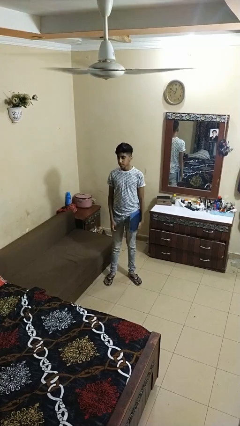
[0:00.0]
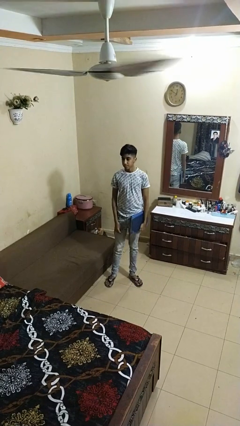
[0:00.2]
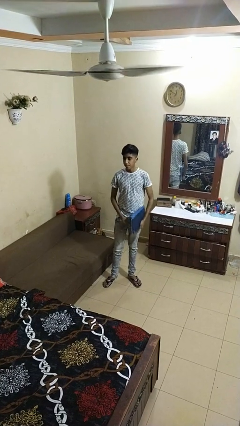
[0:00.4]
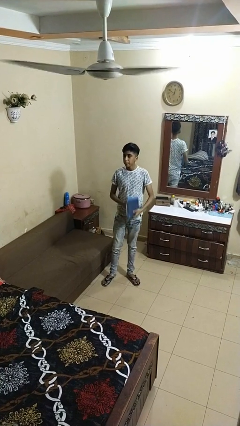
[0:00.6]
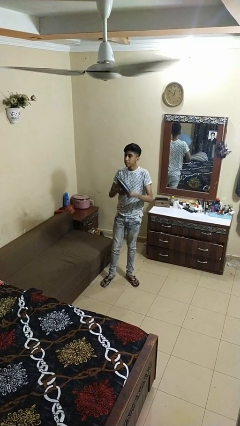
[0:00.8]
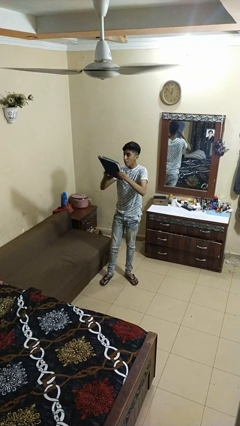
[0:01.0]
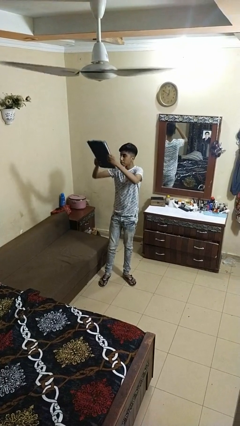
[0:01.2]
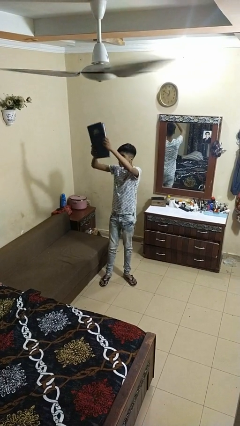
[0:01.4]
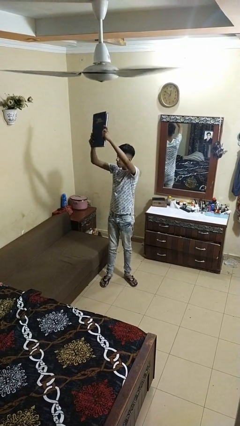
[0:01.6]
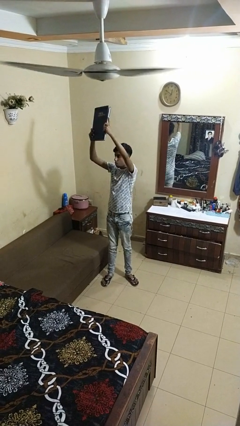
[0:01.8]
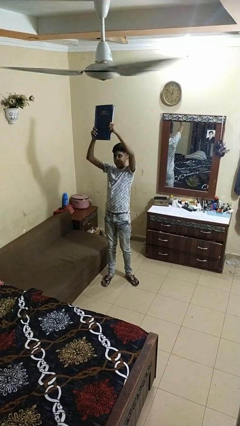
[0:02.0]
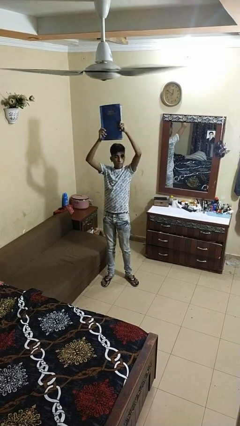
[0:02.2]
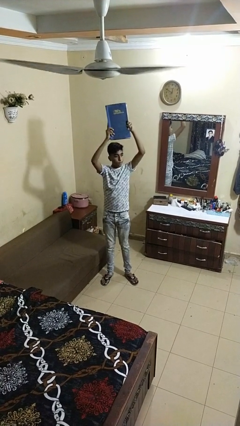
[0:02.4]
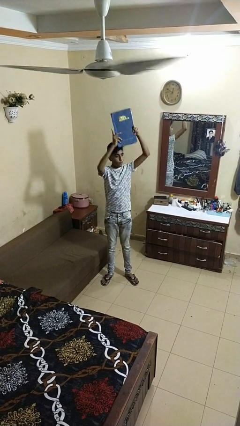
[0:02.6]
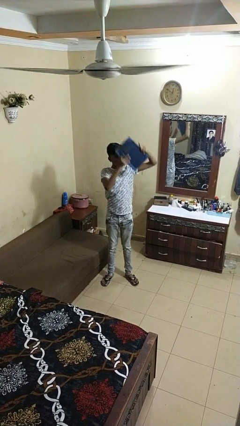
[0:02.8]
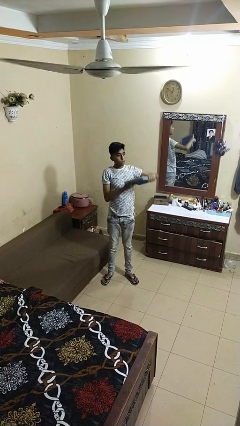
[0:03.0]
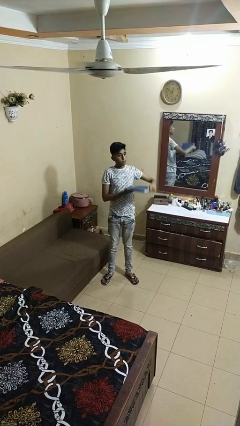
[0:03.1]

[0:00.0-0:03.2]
person holds object above head

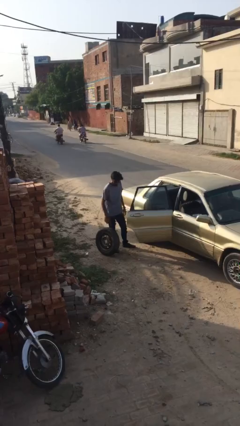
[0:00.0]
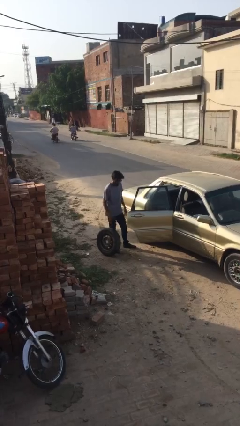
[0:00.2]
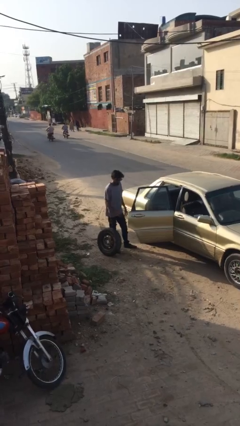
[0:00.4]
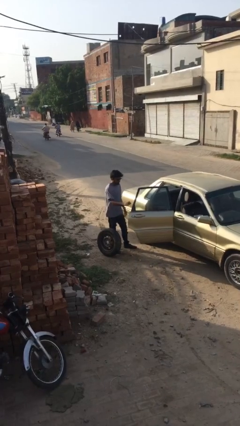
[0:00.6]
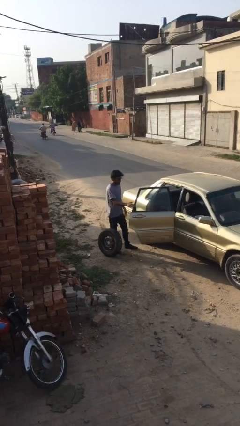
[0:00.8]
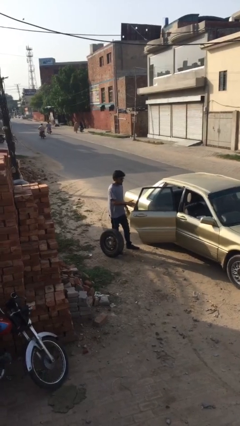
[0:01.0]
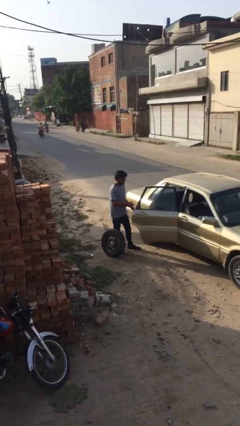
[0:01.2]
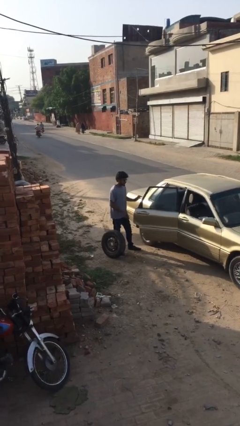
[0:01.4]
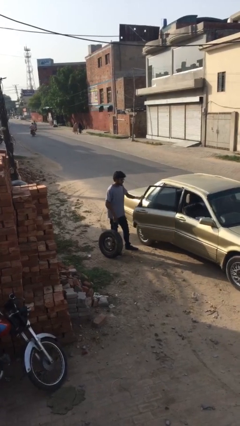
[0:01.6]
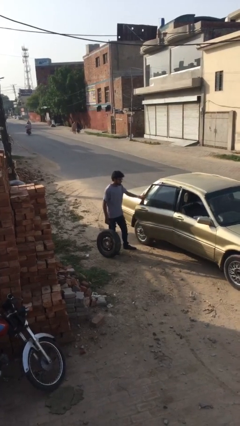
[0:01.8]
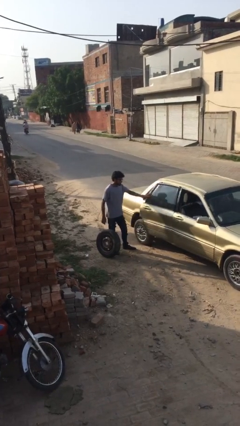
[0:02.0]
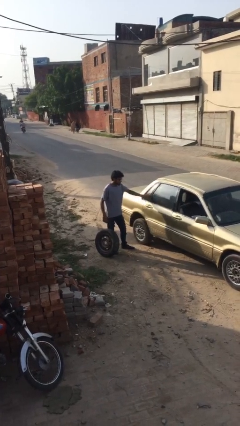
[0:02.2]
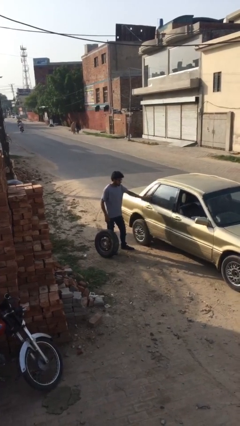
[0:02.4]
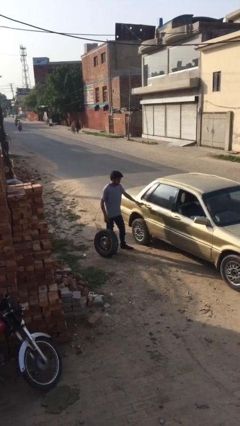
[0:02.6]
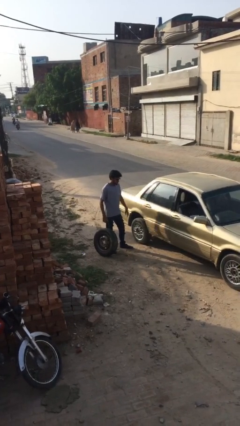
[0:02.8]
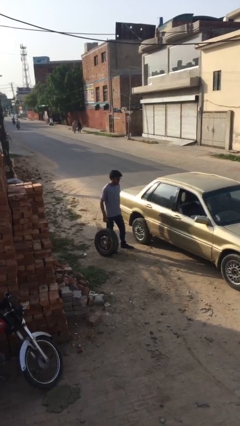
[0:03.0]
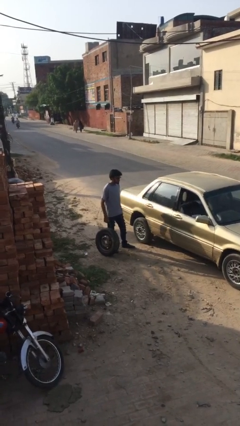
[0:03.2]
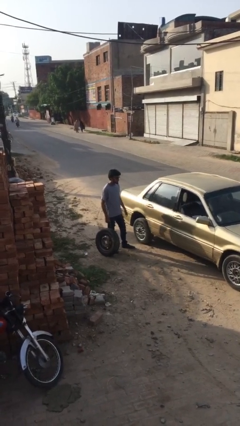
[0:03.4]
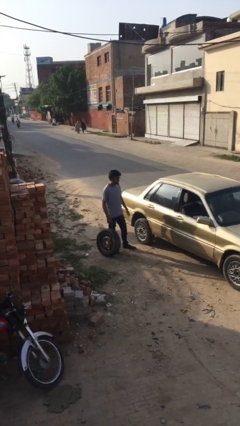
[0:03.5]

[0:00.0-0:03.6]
person closes car door

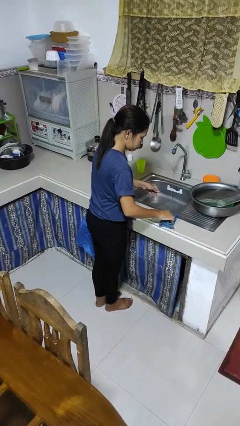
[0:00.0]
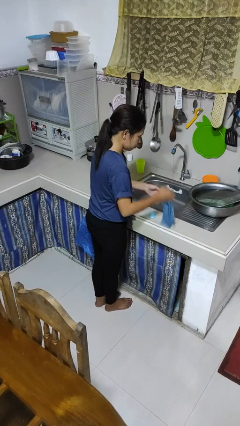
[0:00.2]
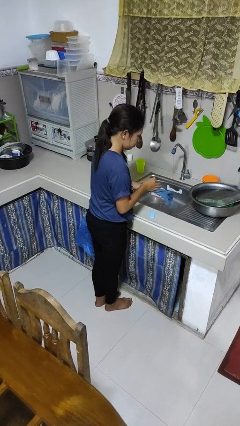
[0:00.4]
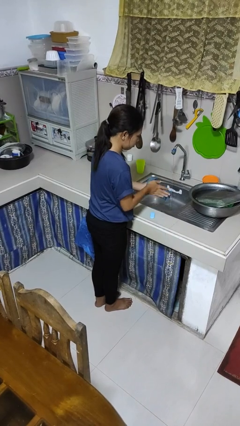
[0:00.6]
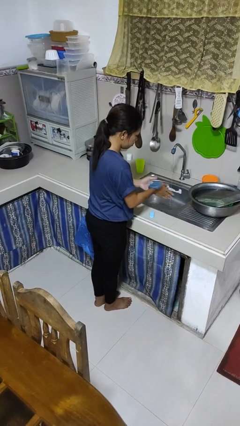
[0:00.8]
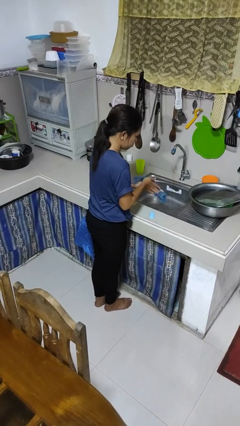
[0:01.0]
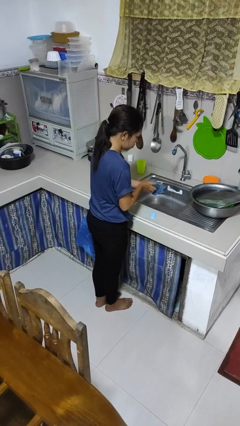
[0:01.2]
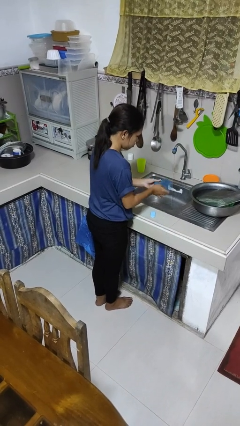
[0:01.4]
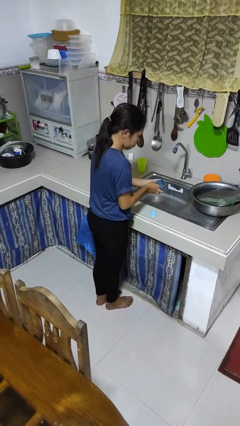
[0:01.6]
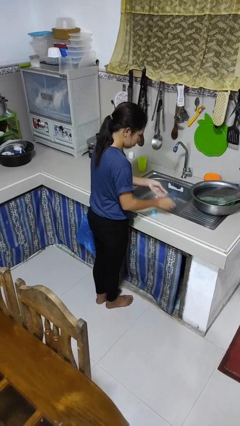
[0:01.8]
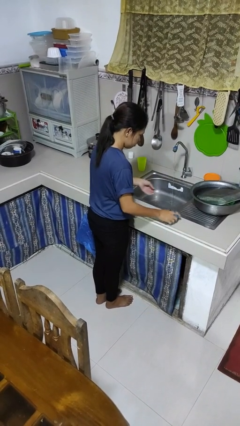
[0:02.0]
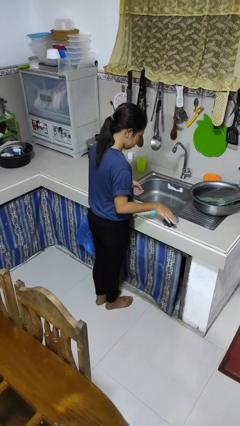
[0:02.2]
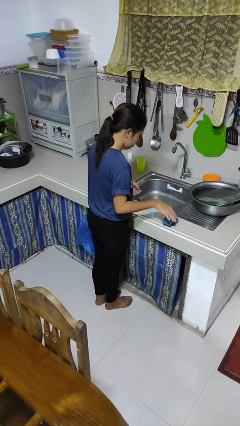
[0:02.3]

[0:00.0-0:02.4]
person dries hands with towel

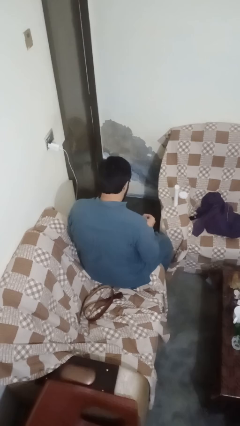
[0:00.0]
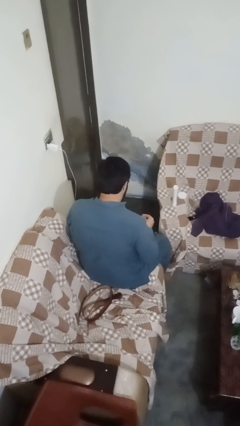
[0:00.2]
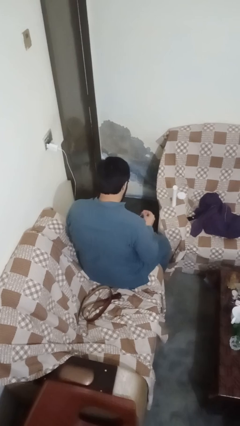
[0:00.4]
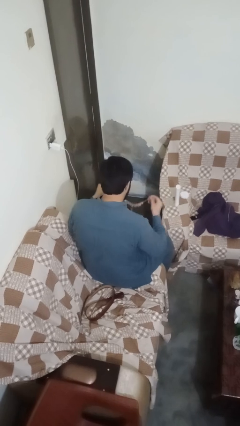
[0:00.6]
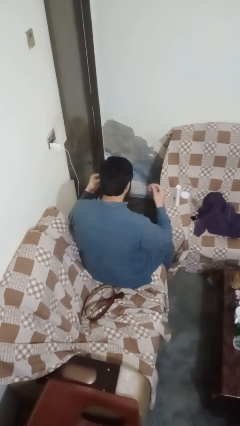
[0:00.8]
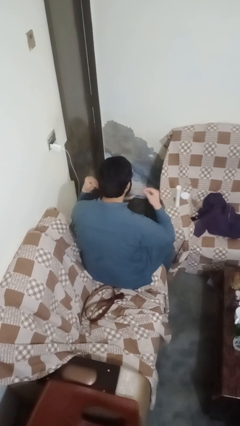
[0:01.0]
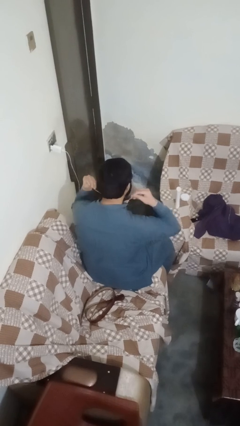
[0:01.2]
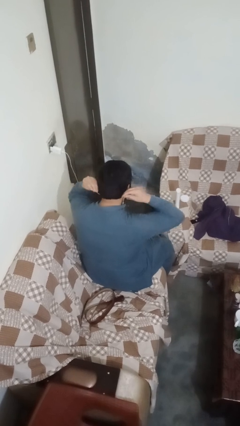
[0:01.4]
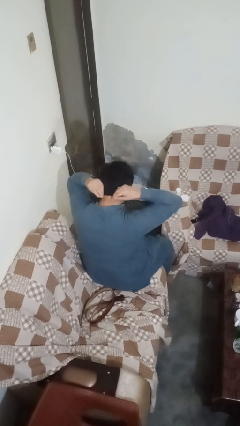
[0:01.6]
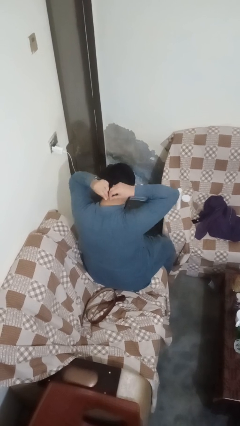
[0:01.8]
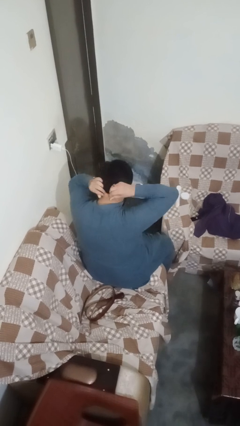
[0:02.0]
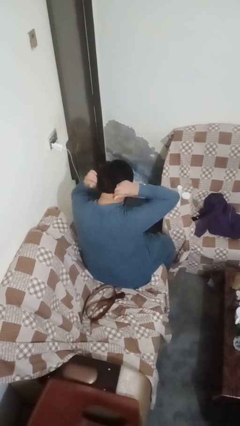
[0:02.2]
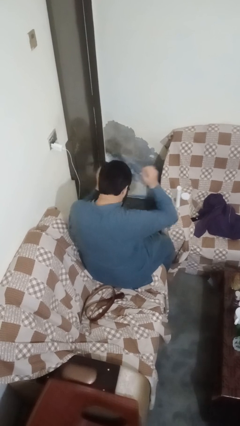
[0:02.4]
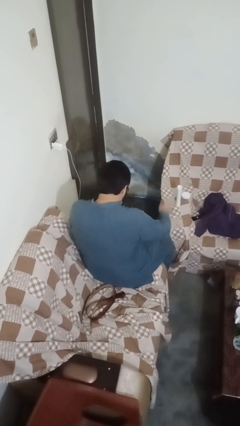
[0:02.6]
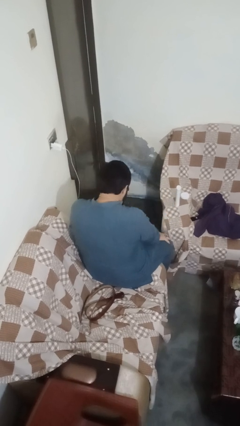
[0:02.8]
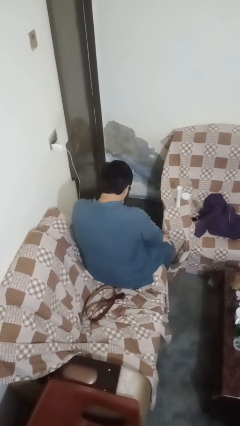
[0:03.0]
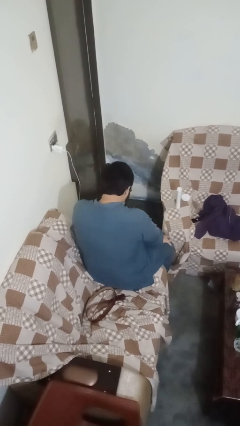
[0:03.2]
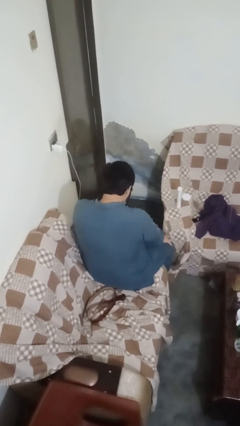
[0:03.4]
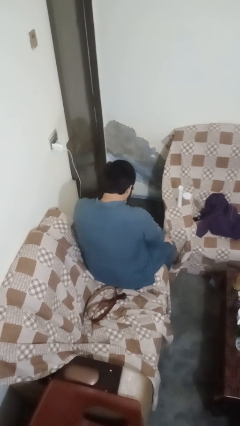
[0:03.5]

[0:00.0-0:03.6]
person puts on necklace

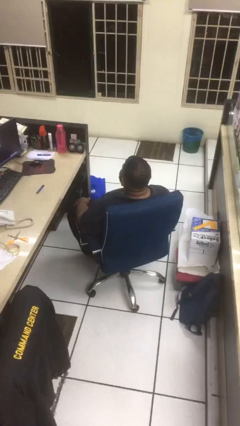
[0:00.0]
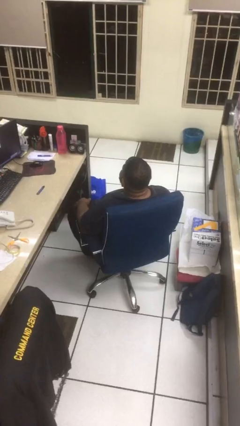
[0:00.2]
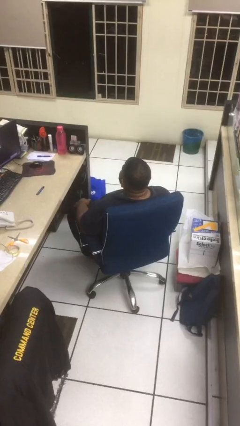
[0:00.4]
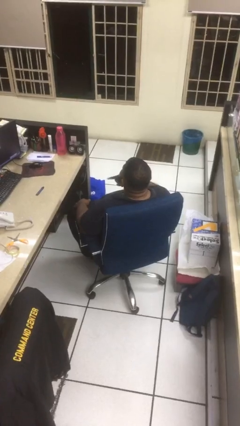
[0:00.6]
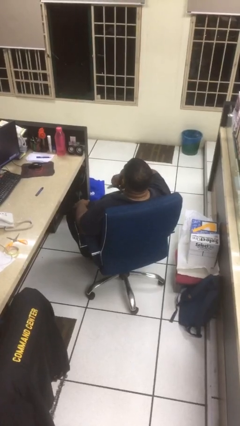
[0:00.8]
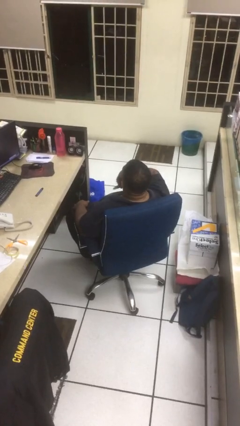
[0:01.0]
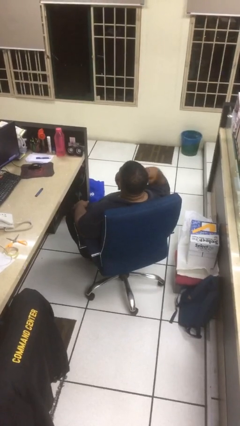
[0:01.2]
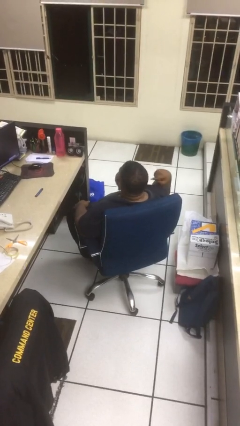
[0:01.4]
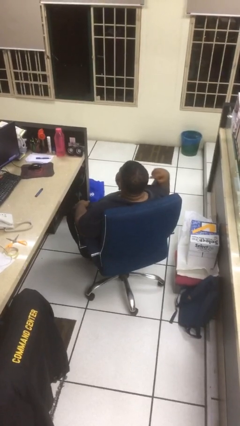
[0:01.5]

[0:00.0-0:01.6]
person gestures cut

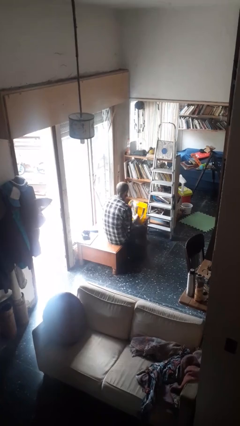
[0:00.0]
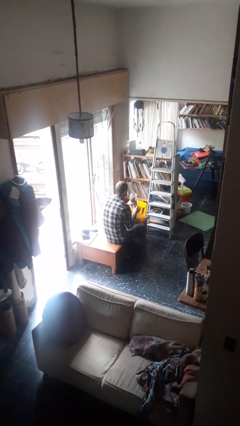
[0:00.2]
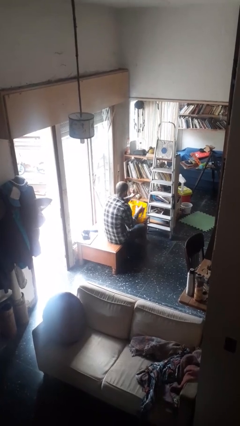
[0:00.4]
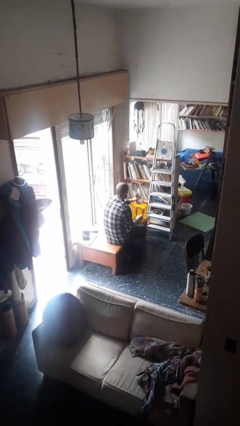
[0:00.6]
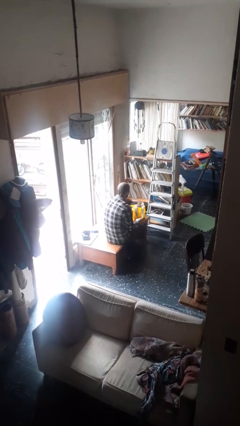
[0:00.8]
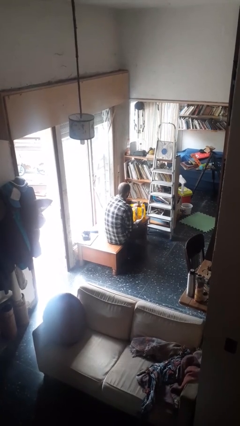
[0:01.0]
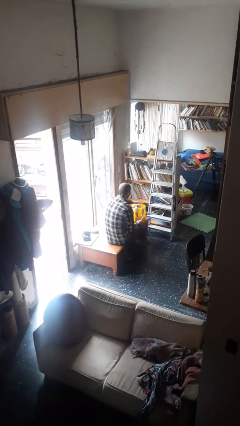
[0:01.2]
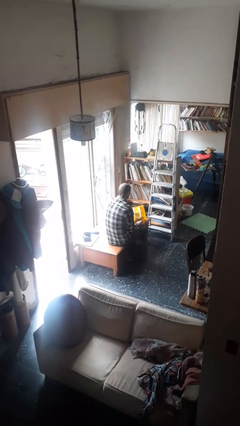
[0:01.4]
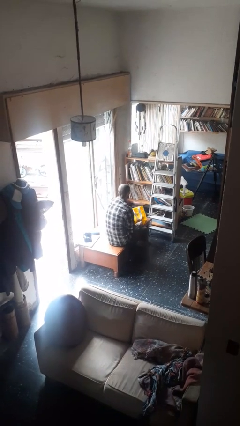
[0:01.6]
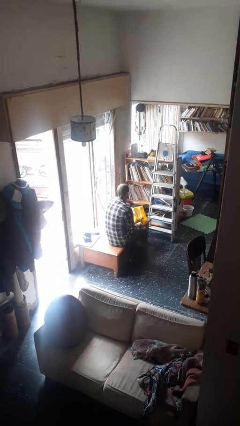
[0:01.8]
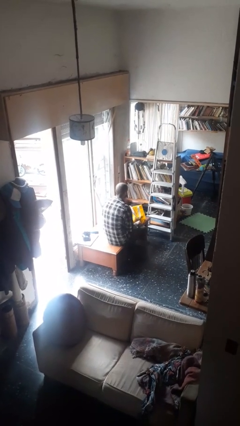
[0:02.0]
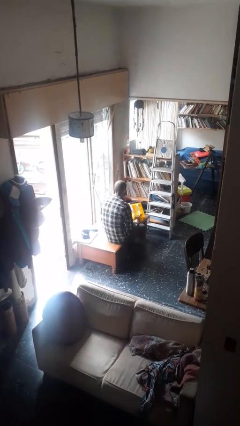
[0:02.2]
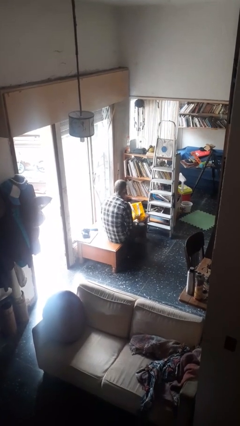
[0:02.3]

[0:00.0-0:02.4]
person puts object into bag

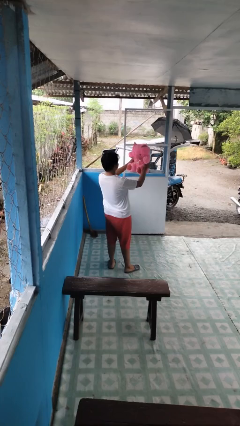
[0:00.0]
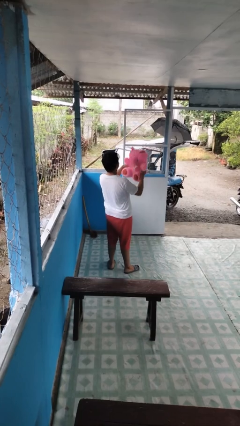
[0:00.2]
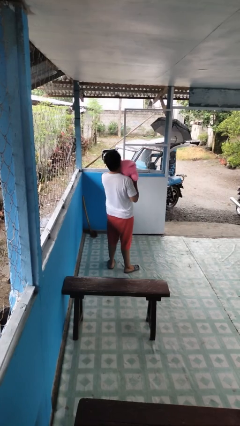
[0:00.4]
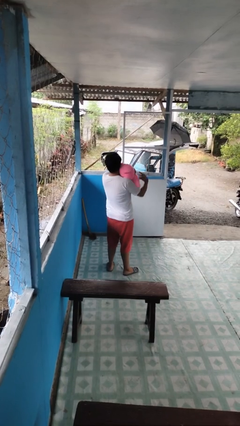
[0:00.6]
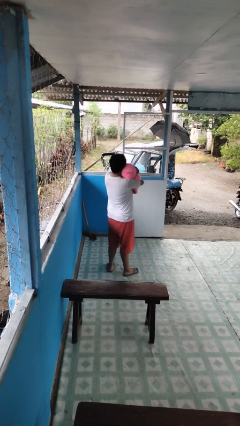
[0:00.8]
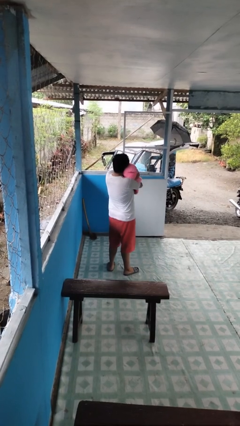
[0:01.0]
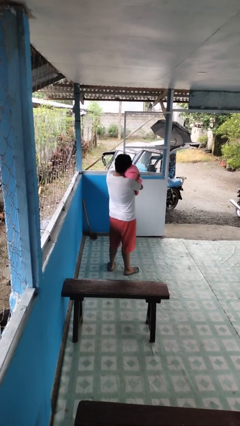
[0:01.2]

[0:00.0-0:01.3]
person hugs stuffed animal
